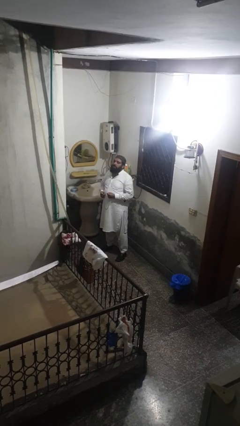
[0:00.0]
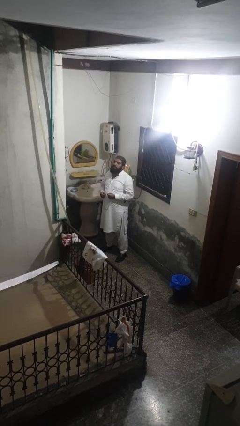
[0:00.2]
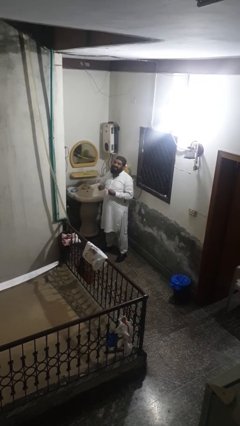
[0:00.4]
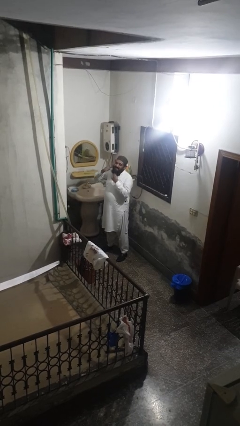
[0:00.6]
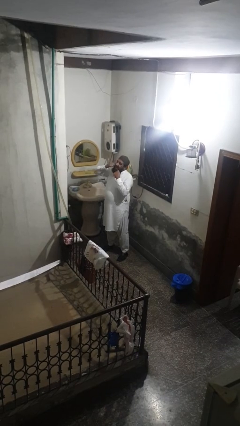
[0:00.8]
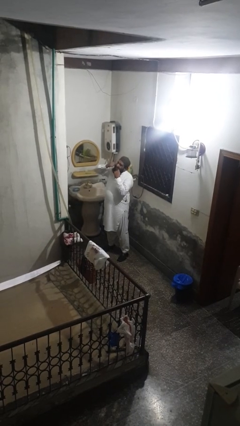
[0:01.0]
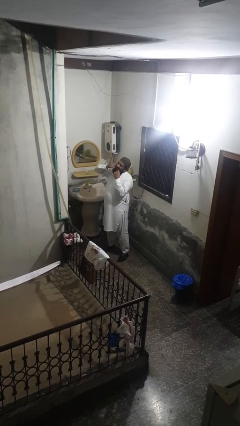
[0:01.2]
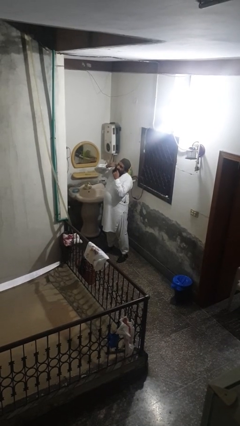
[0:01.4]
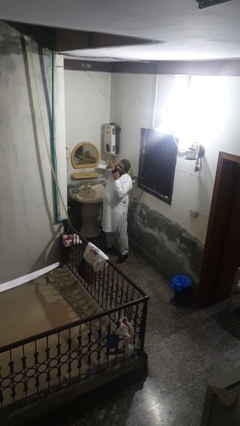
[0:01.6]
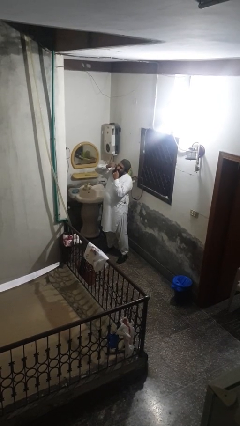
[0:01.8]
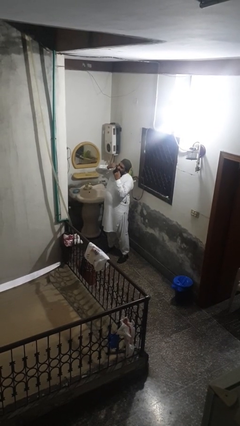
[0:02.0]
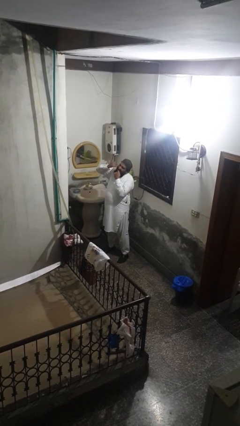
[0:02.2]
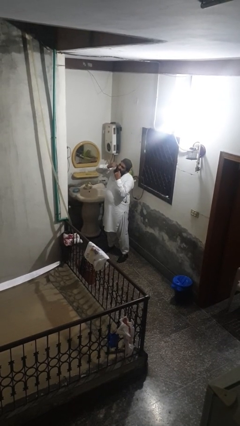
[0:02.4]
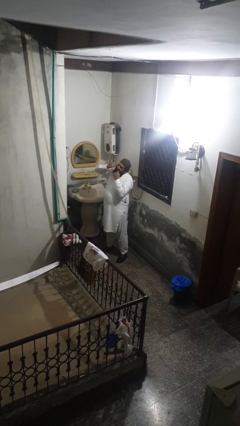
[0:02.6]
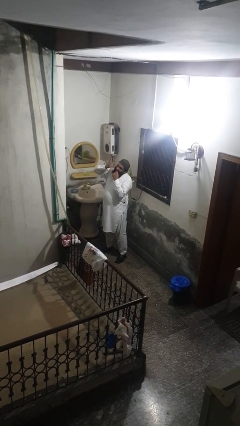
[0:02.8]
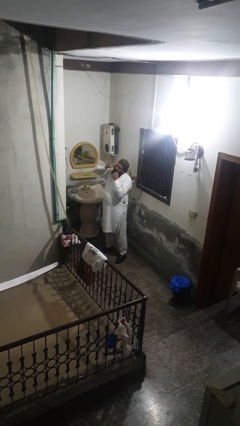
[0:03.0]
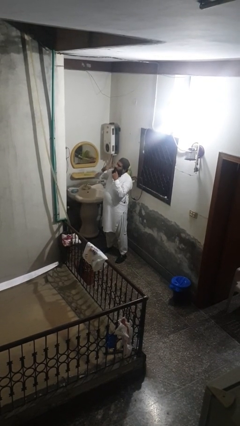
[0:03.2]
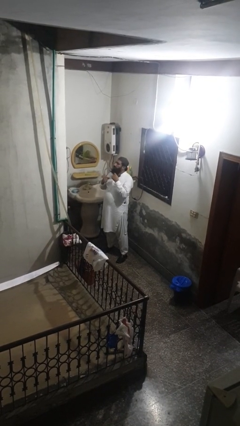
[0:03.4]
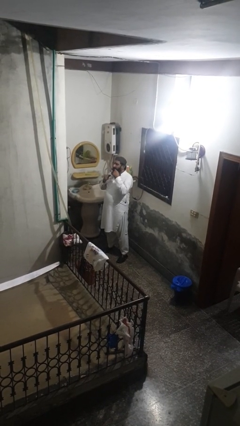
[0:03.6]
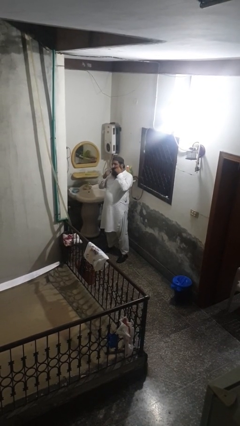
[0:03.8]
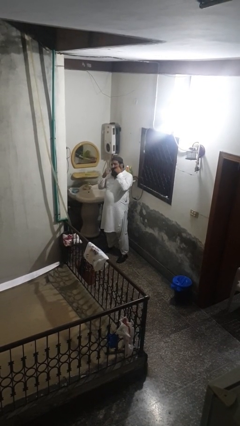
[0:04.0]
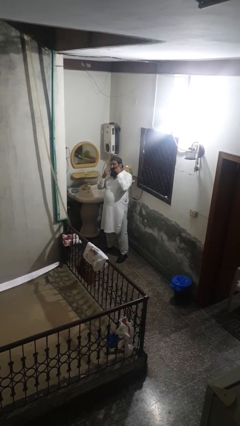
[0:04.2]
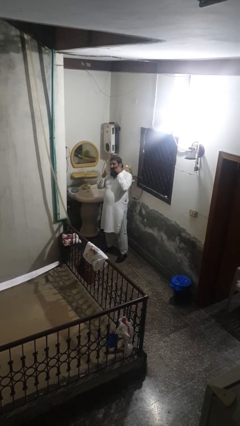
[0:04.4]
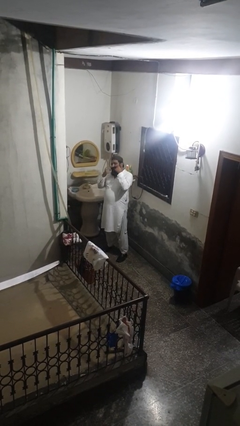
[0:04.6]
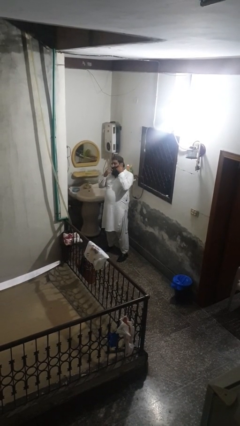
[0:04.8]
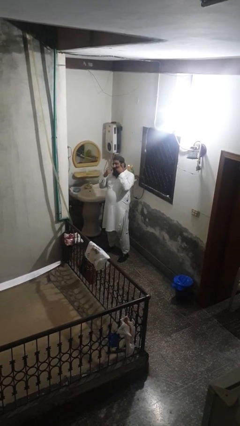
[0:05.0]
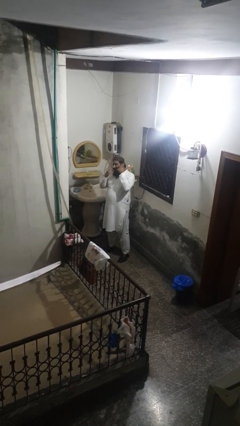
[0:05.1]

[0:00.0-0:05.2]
person flosses

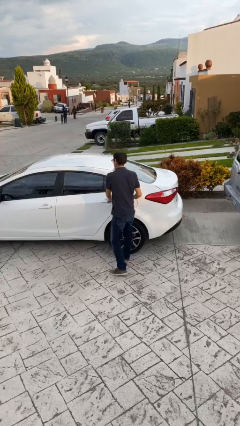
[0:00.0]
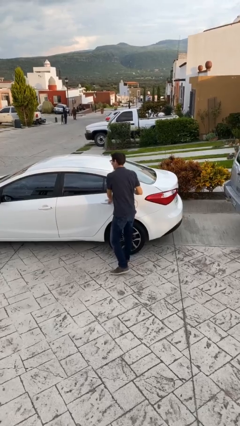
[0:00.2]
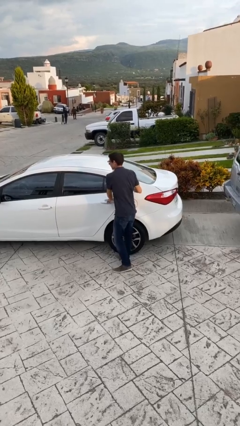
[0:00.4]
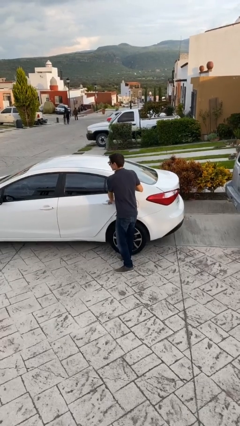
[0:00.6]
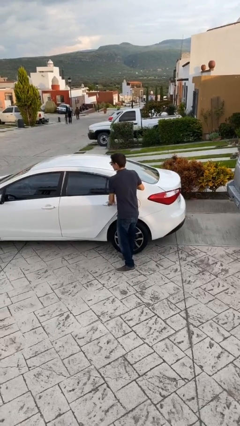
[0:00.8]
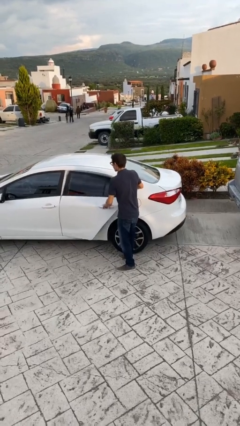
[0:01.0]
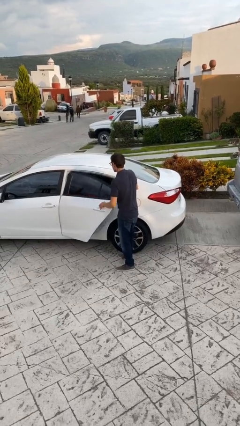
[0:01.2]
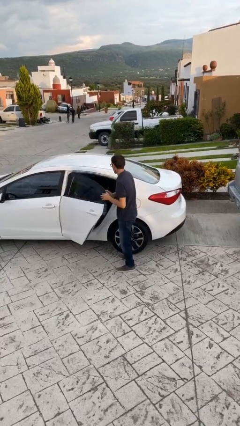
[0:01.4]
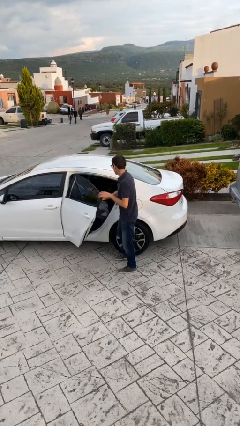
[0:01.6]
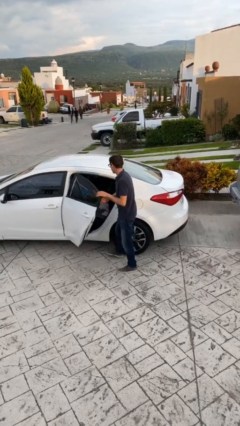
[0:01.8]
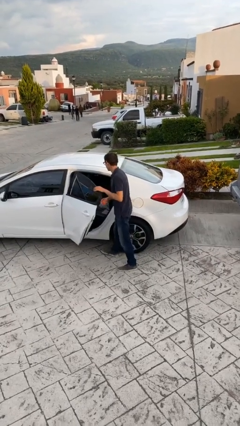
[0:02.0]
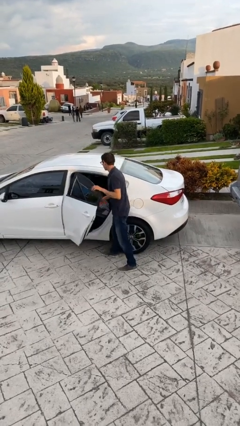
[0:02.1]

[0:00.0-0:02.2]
person opens car door

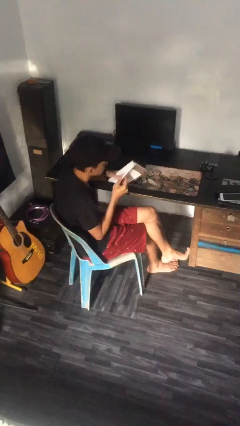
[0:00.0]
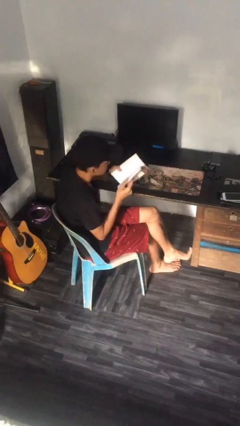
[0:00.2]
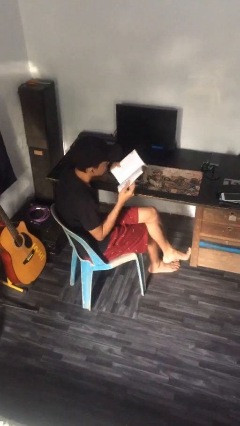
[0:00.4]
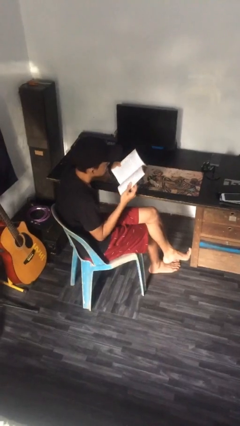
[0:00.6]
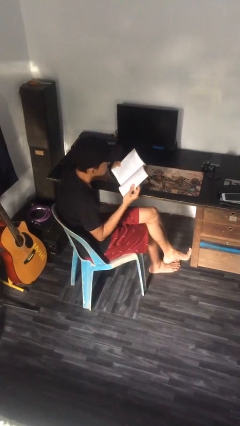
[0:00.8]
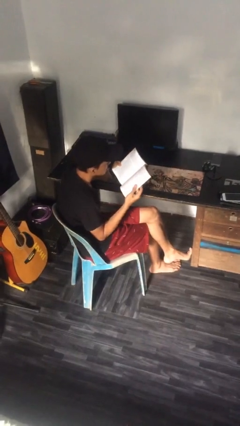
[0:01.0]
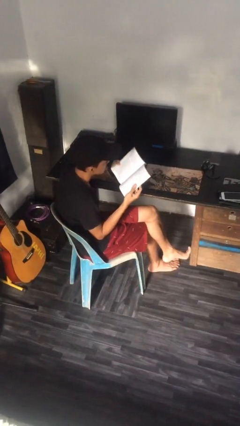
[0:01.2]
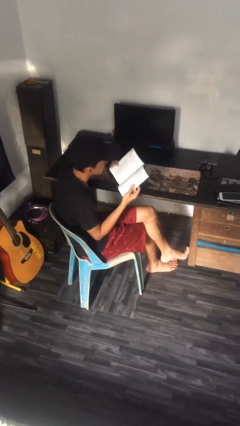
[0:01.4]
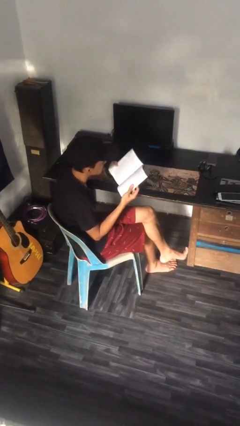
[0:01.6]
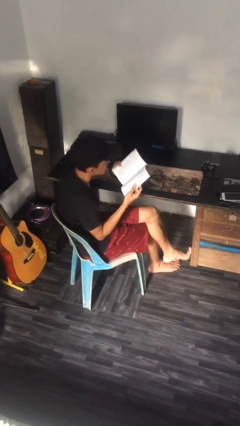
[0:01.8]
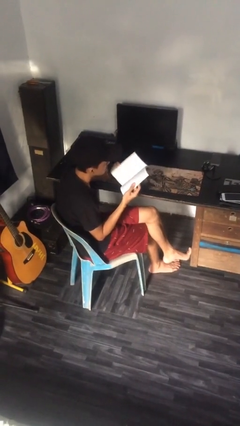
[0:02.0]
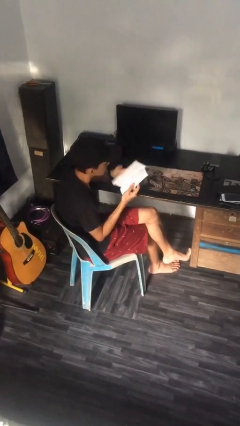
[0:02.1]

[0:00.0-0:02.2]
person reads document

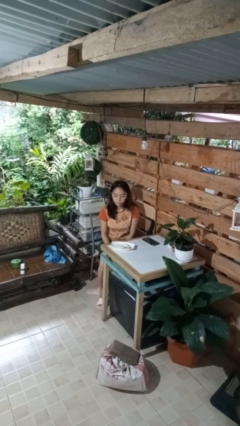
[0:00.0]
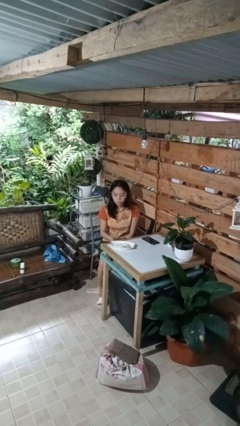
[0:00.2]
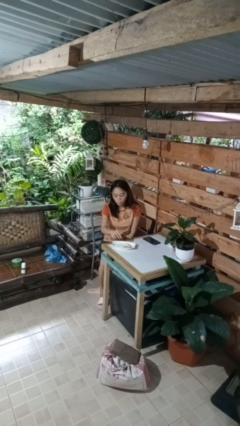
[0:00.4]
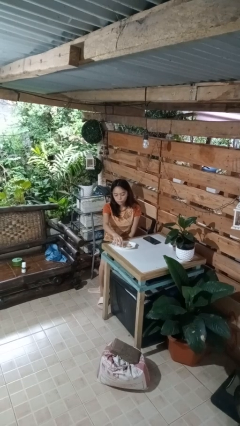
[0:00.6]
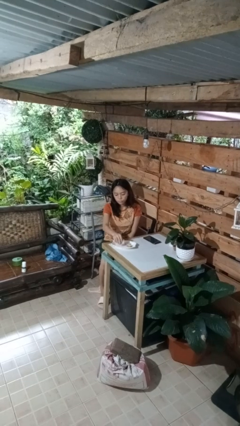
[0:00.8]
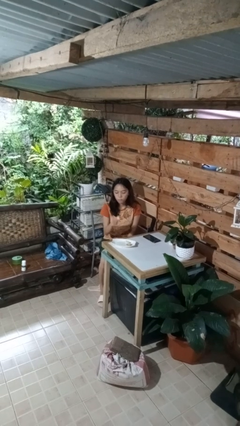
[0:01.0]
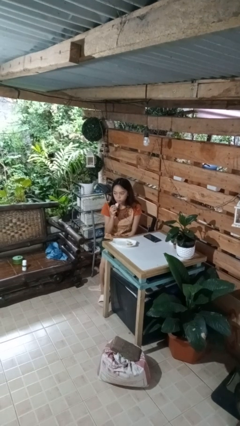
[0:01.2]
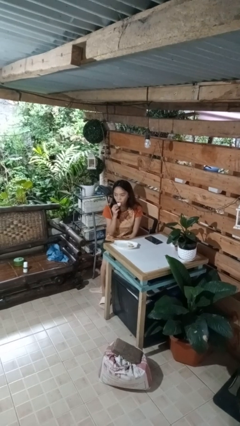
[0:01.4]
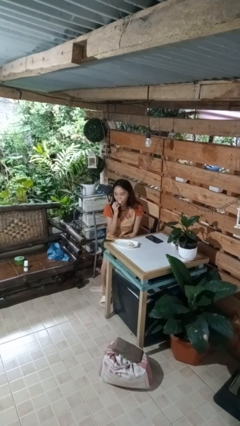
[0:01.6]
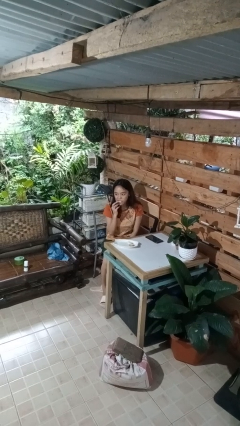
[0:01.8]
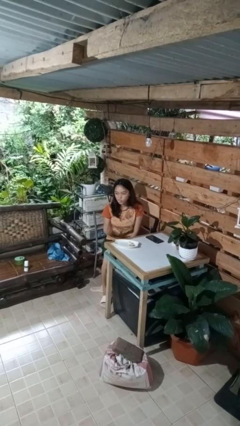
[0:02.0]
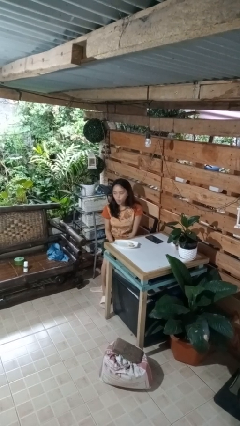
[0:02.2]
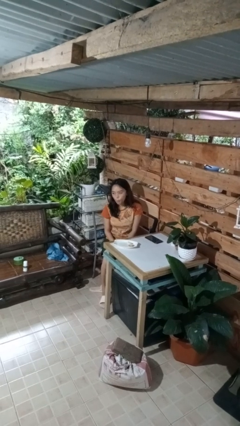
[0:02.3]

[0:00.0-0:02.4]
person eats with hands

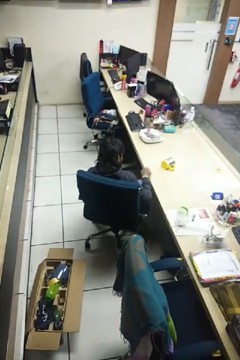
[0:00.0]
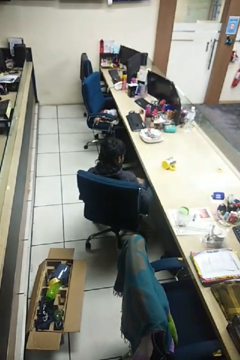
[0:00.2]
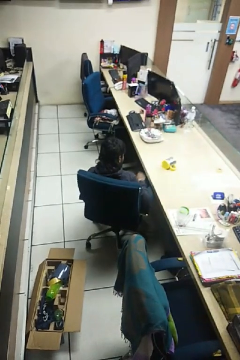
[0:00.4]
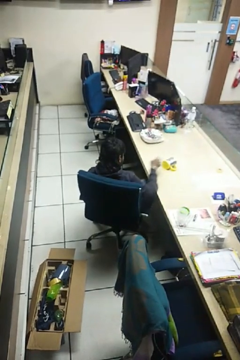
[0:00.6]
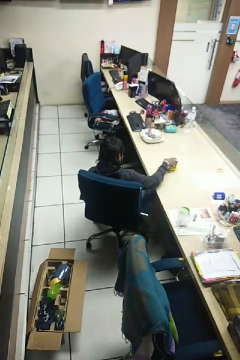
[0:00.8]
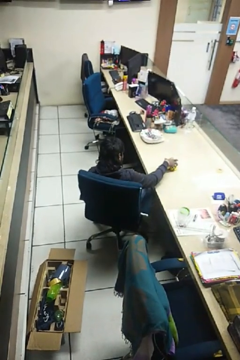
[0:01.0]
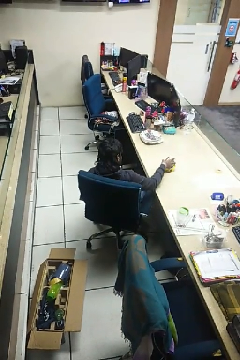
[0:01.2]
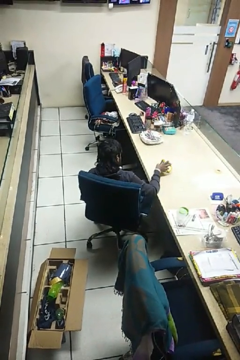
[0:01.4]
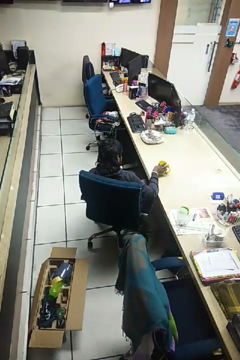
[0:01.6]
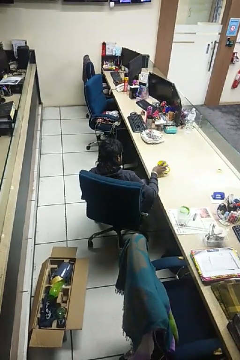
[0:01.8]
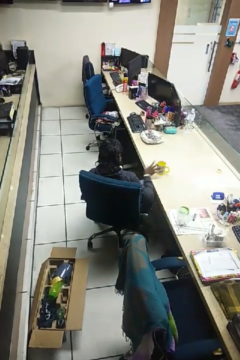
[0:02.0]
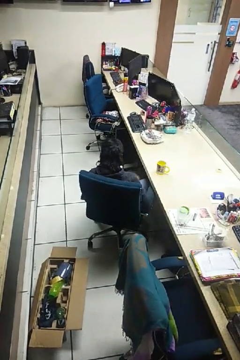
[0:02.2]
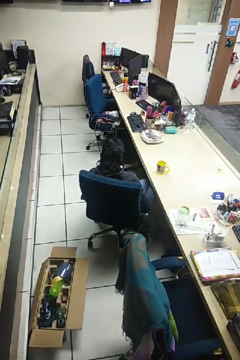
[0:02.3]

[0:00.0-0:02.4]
person sets upright glass

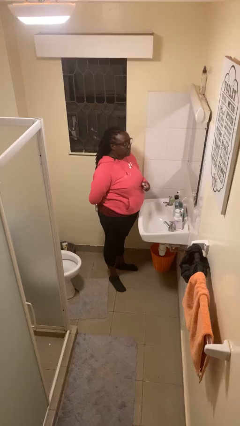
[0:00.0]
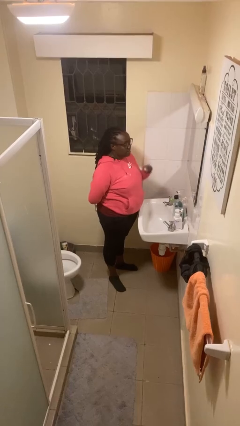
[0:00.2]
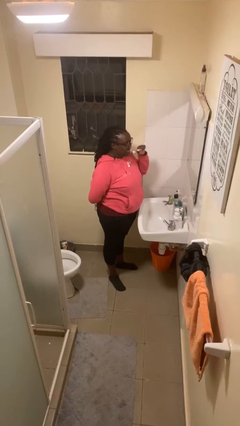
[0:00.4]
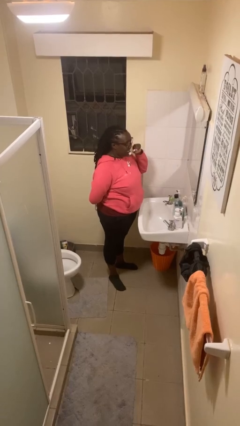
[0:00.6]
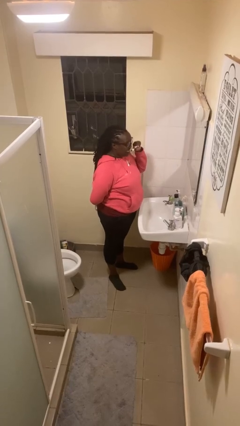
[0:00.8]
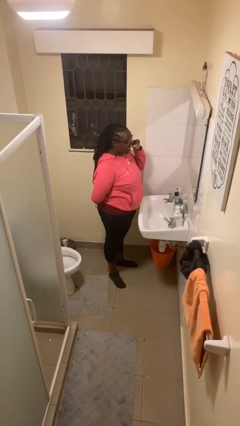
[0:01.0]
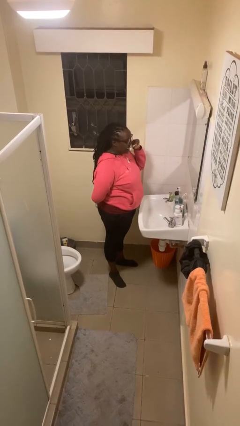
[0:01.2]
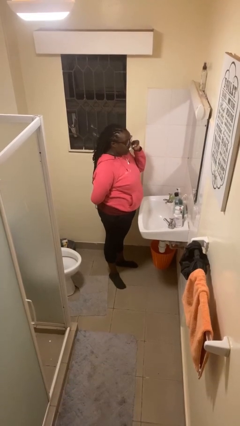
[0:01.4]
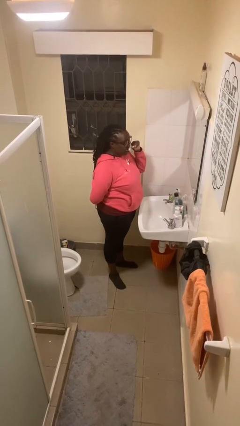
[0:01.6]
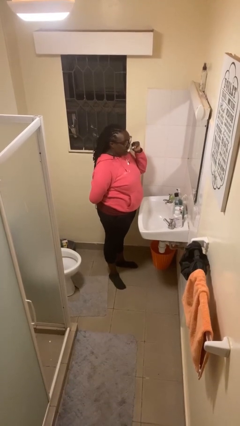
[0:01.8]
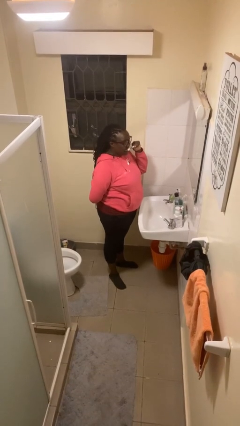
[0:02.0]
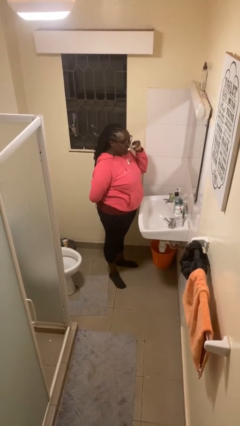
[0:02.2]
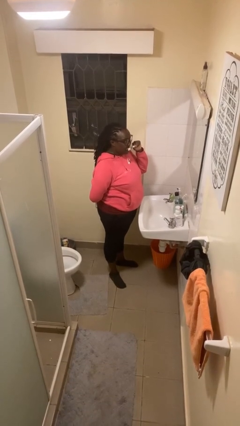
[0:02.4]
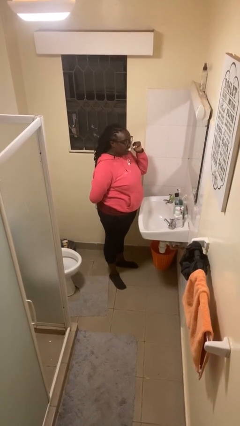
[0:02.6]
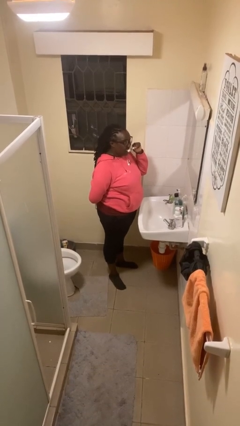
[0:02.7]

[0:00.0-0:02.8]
person brushes teeth

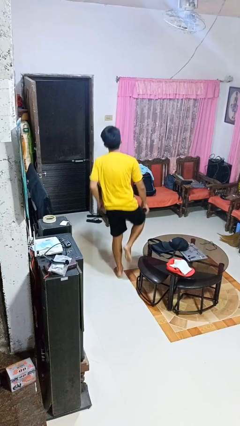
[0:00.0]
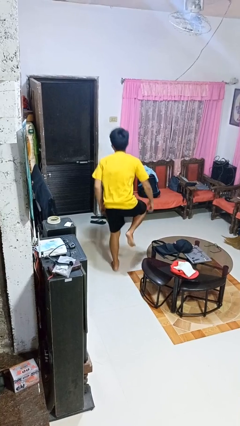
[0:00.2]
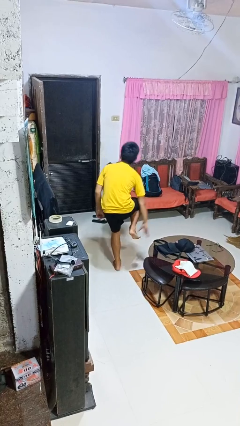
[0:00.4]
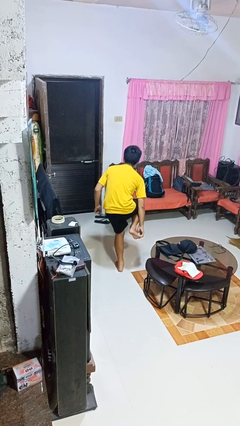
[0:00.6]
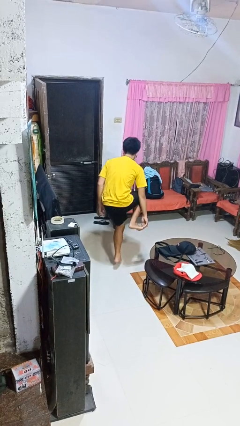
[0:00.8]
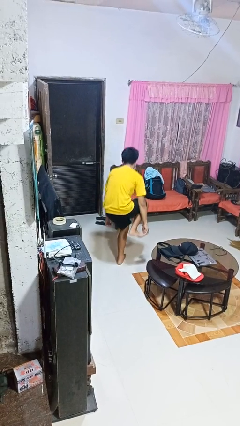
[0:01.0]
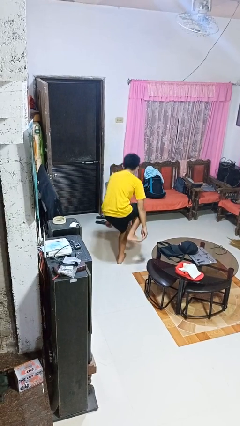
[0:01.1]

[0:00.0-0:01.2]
person trips on object on floor
